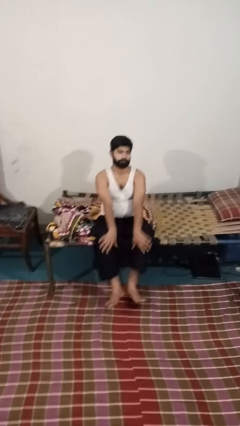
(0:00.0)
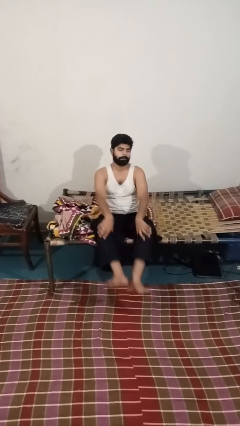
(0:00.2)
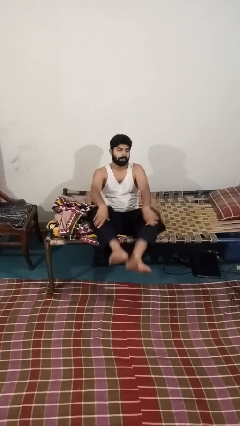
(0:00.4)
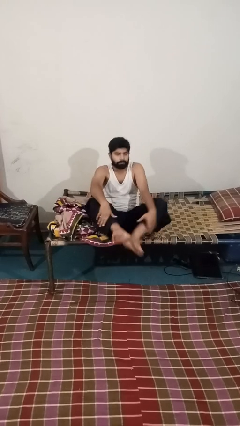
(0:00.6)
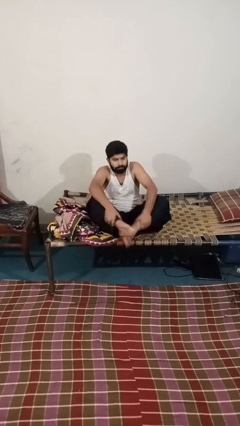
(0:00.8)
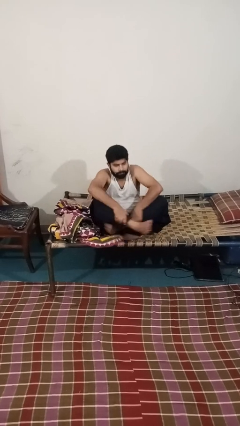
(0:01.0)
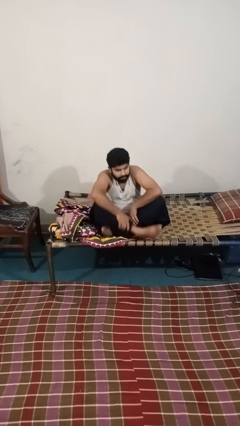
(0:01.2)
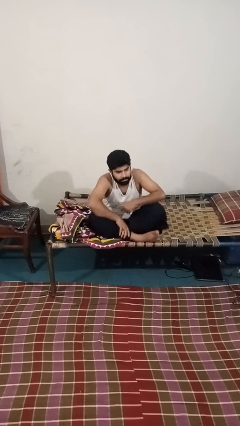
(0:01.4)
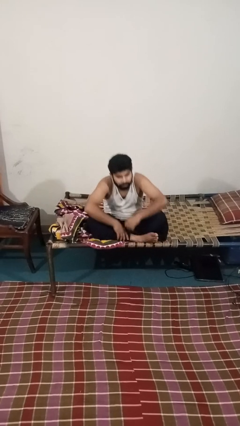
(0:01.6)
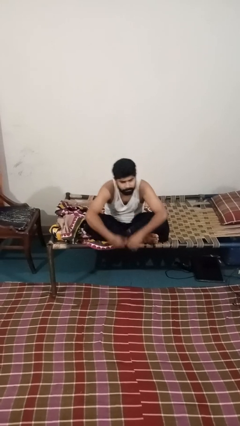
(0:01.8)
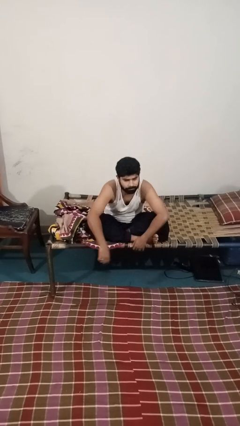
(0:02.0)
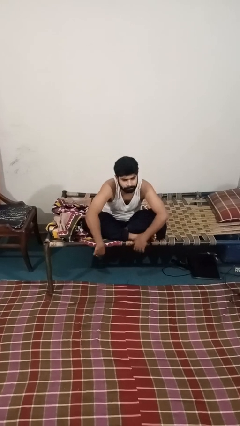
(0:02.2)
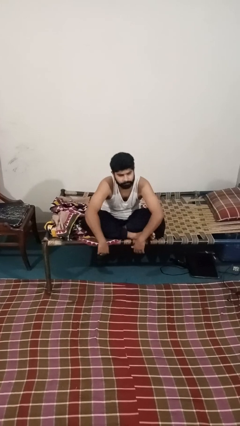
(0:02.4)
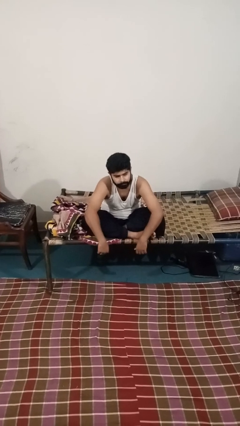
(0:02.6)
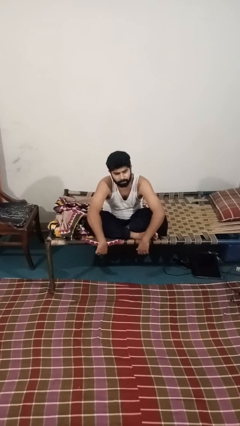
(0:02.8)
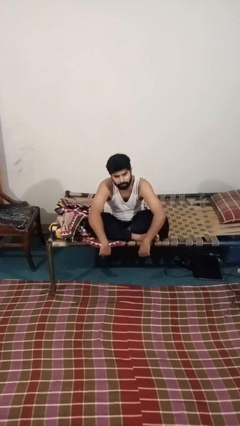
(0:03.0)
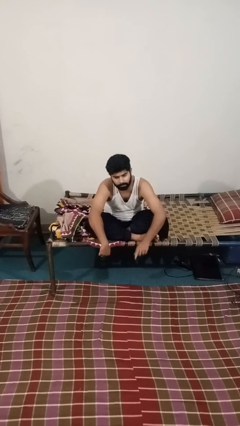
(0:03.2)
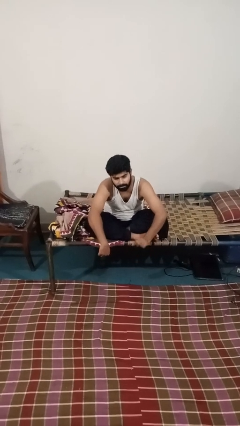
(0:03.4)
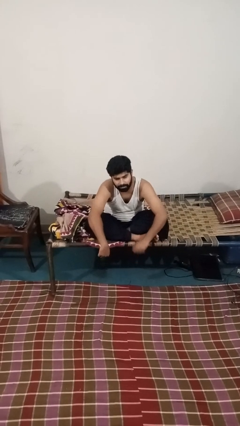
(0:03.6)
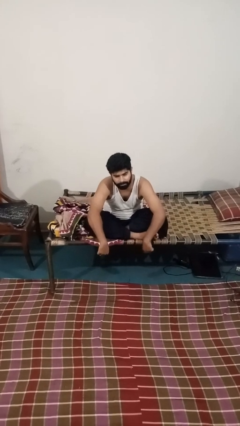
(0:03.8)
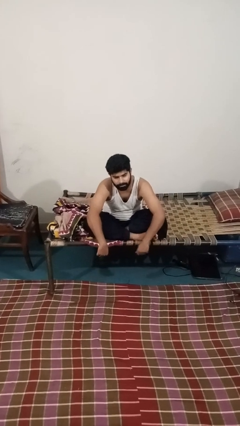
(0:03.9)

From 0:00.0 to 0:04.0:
person crosses legs

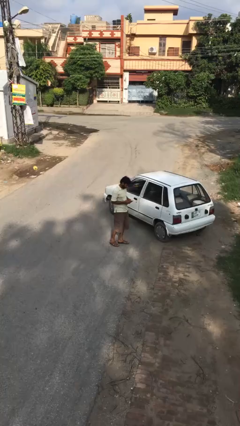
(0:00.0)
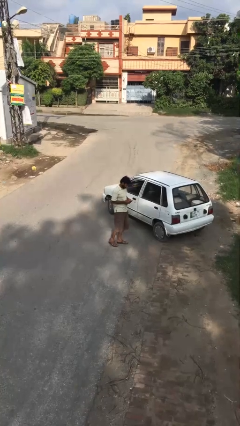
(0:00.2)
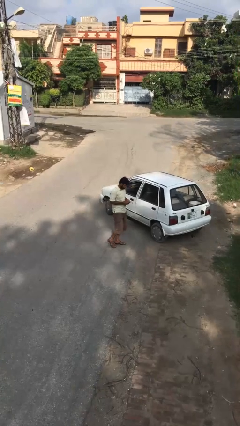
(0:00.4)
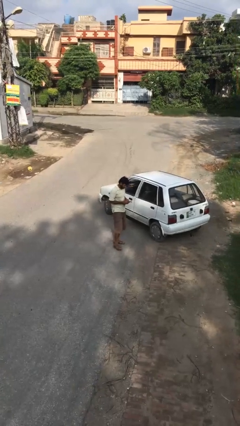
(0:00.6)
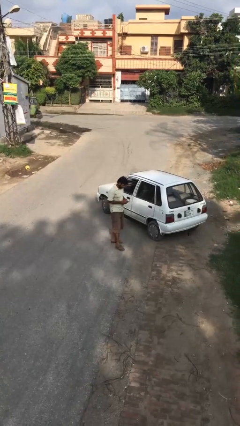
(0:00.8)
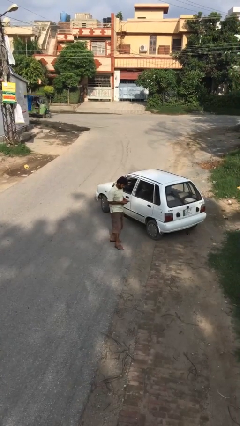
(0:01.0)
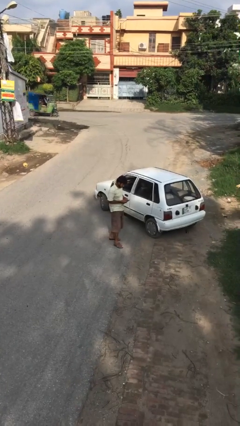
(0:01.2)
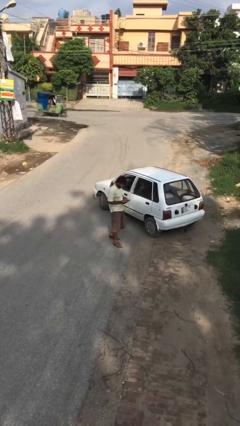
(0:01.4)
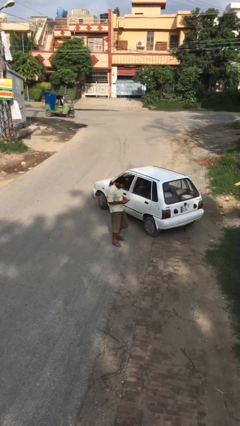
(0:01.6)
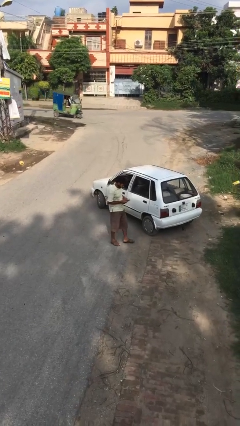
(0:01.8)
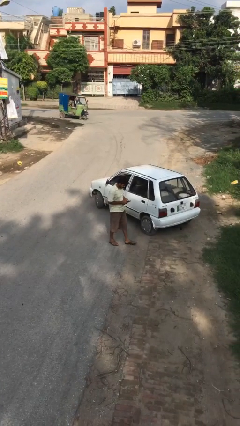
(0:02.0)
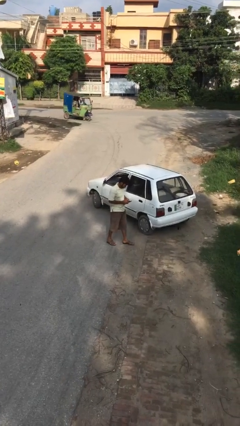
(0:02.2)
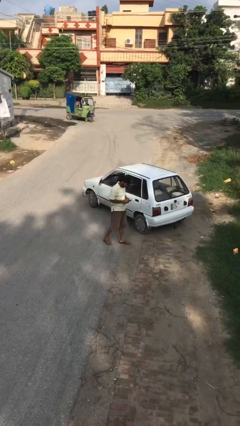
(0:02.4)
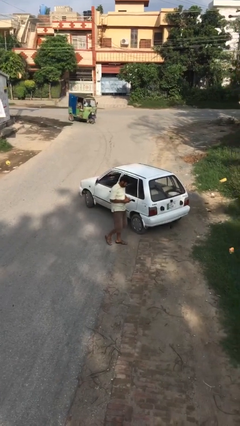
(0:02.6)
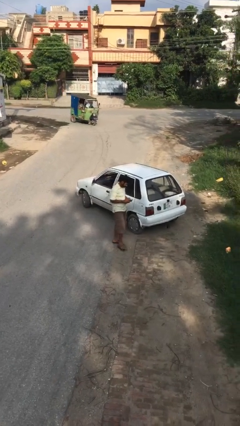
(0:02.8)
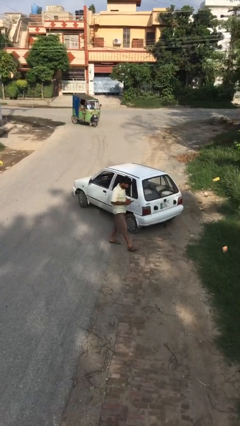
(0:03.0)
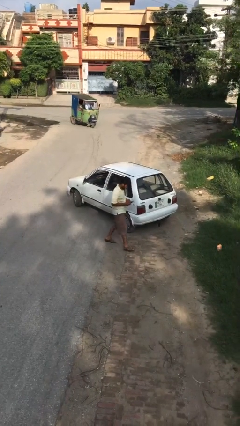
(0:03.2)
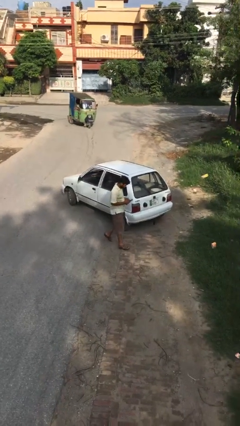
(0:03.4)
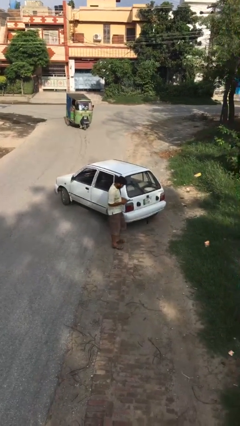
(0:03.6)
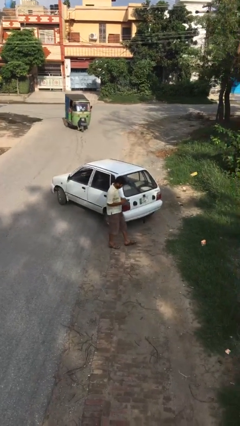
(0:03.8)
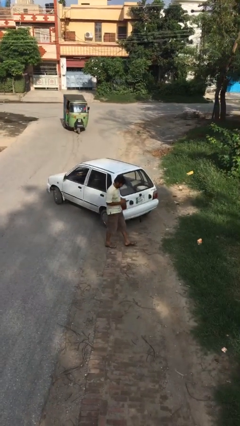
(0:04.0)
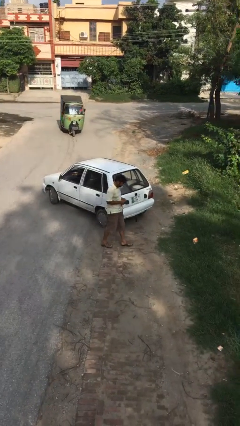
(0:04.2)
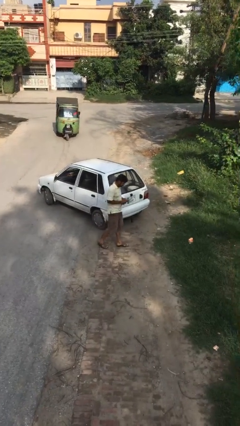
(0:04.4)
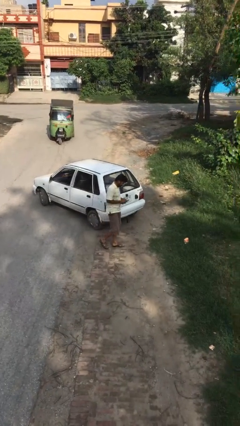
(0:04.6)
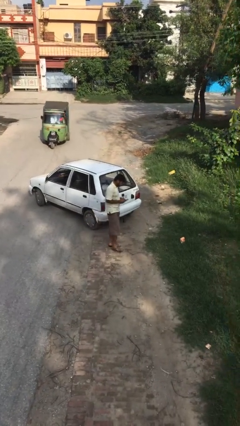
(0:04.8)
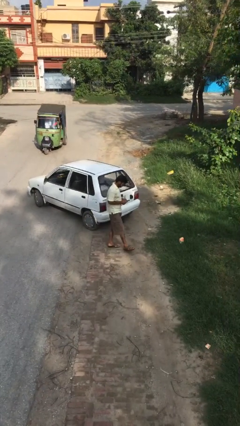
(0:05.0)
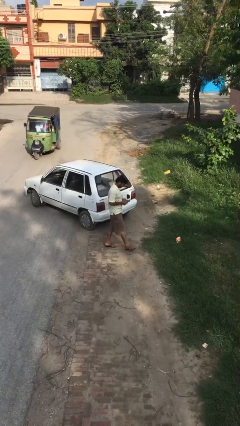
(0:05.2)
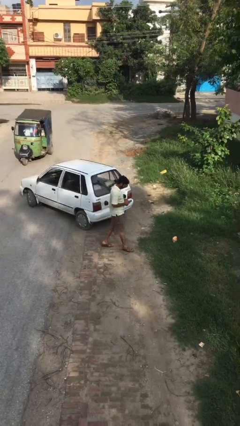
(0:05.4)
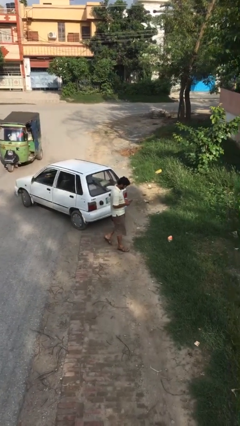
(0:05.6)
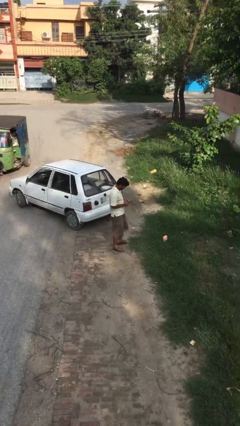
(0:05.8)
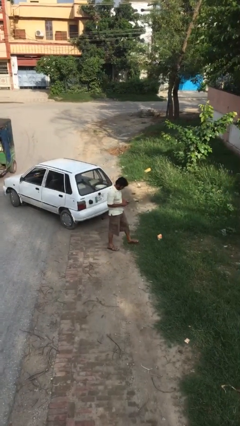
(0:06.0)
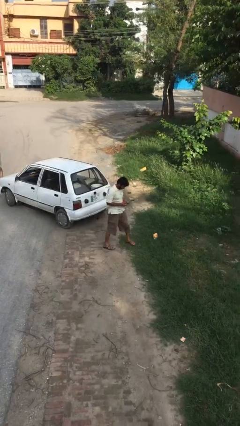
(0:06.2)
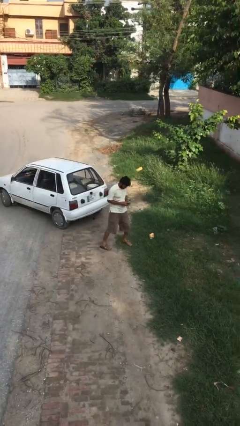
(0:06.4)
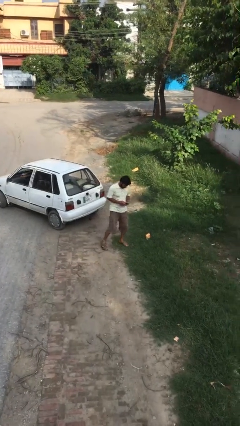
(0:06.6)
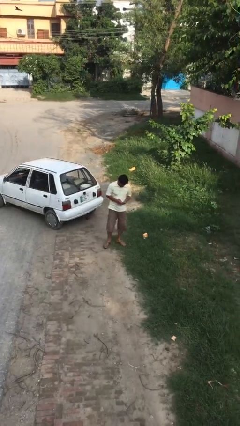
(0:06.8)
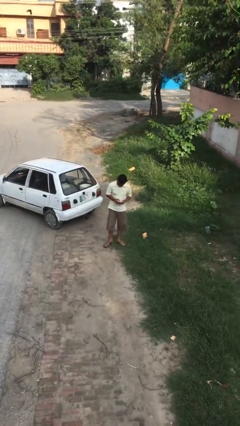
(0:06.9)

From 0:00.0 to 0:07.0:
person texts on phone

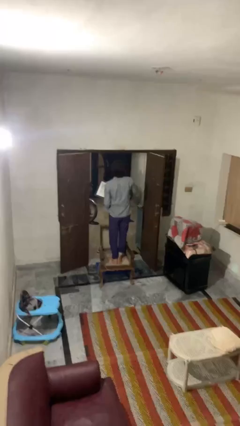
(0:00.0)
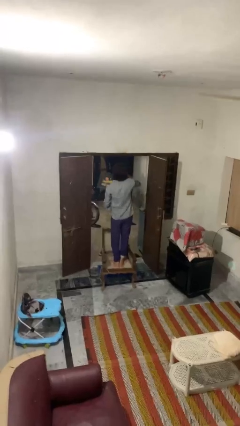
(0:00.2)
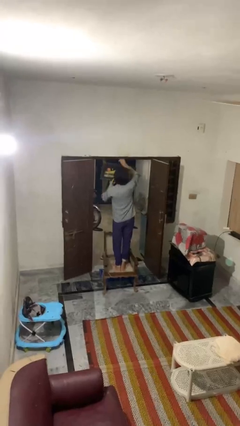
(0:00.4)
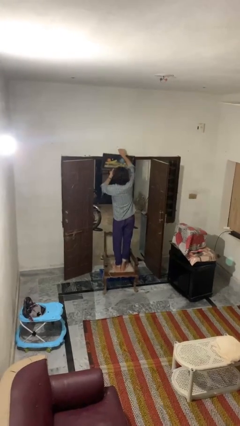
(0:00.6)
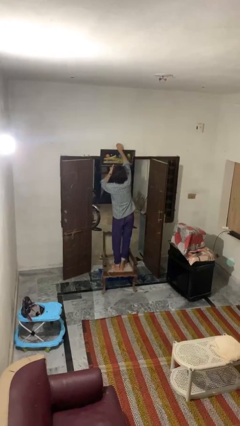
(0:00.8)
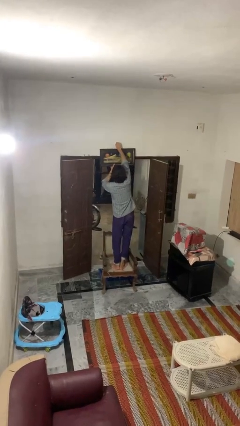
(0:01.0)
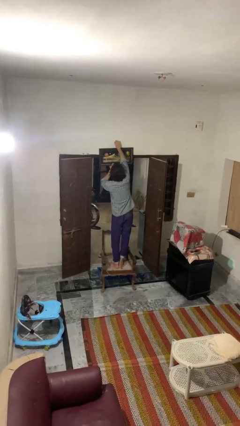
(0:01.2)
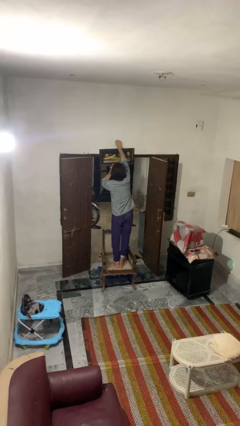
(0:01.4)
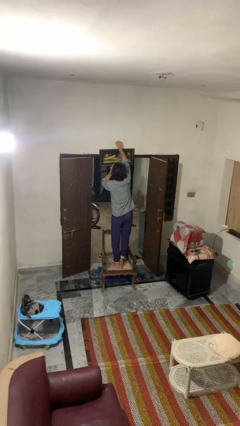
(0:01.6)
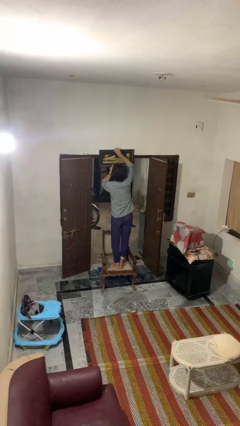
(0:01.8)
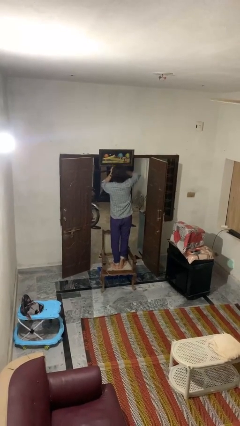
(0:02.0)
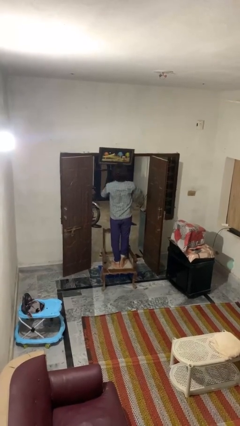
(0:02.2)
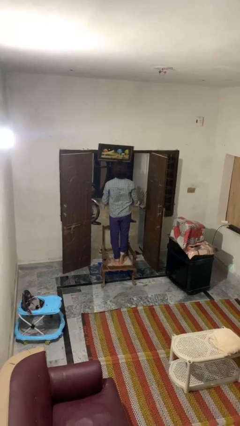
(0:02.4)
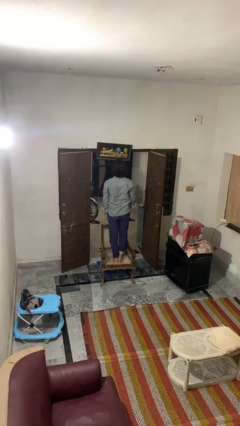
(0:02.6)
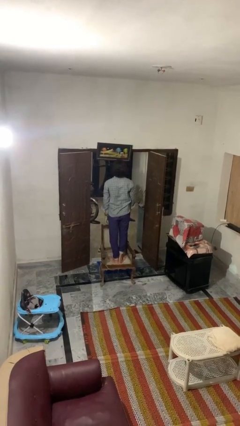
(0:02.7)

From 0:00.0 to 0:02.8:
person puts up picture frame

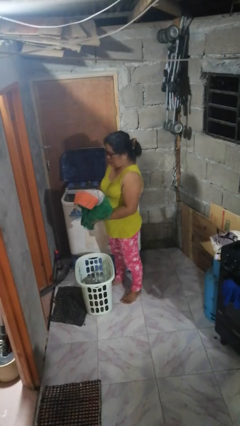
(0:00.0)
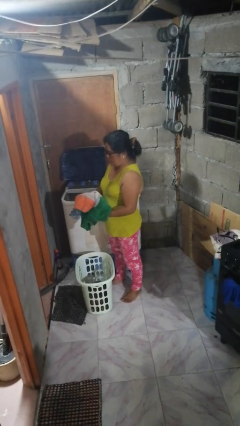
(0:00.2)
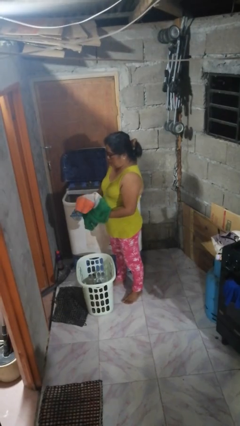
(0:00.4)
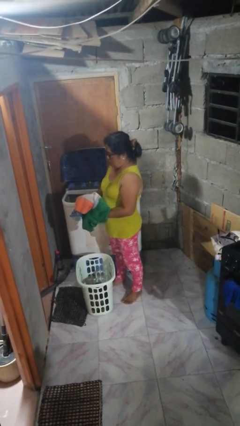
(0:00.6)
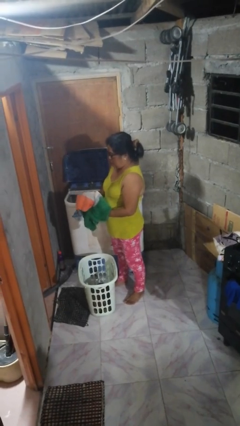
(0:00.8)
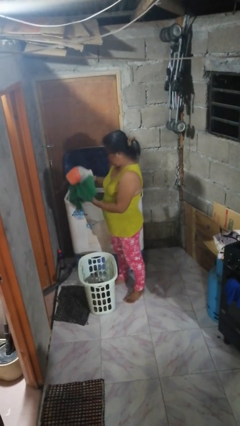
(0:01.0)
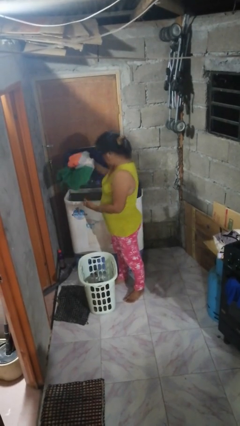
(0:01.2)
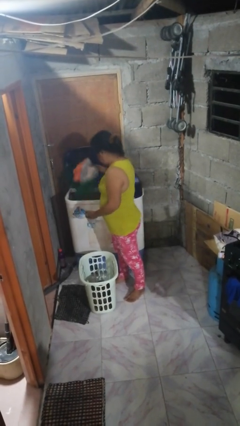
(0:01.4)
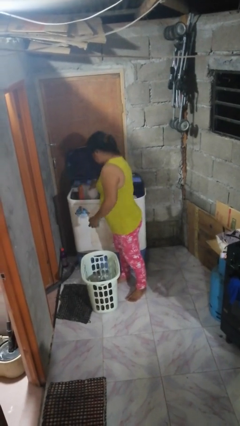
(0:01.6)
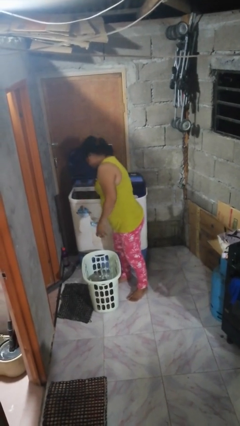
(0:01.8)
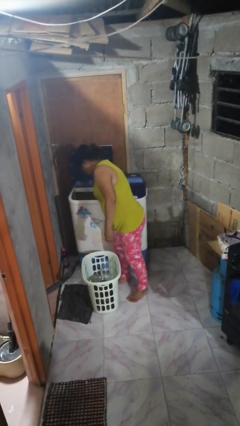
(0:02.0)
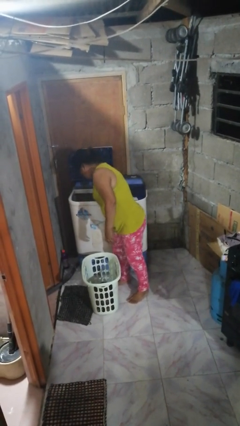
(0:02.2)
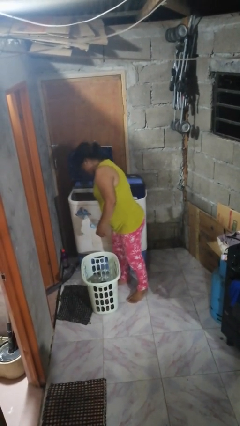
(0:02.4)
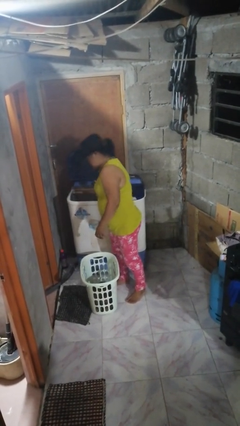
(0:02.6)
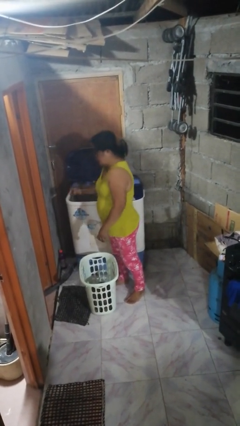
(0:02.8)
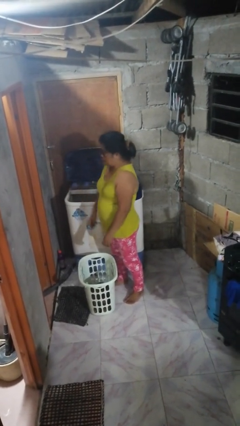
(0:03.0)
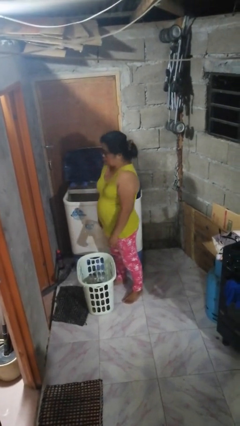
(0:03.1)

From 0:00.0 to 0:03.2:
person loads clotheswasher

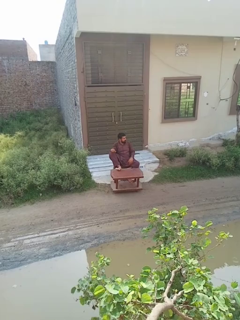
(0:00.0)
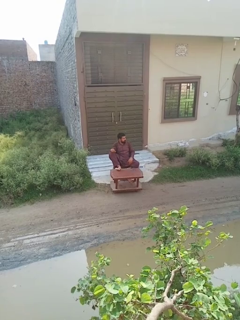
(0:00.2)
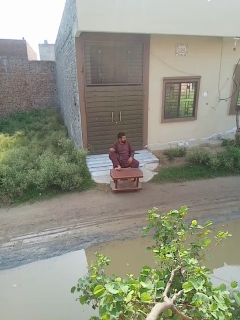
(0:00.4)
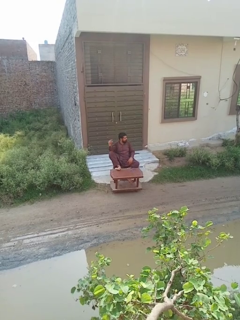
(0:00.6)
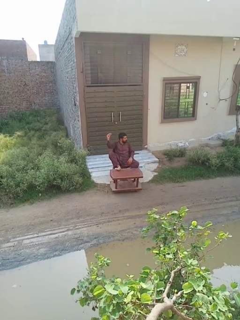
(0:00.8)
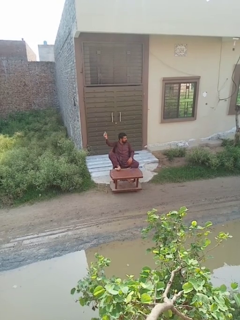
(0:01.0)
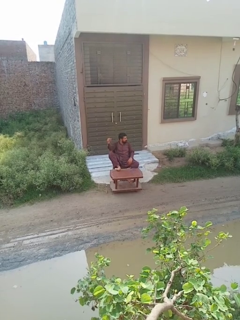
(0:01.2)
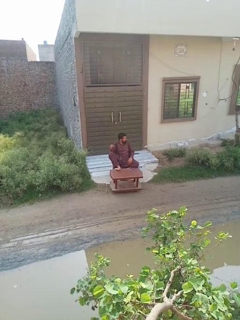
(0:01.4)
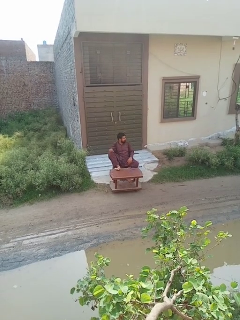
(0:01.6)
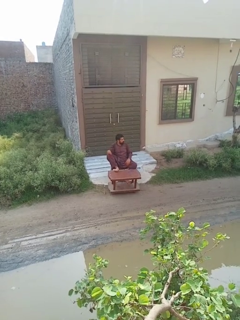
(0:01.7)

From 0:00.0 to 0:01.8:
person snaps fingers
